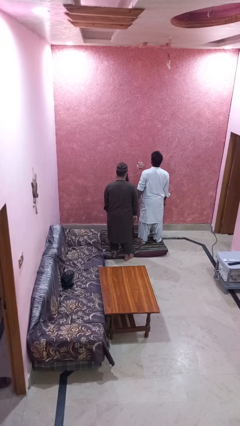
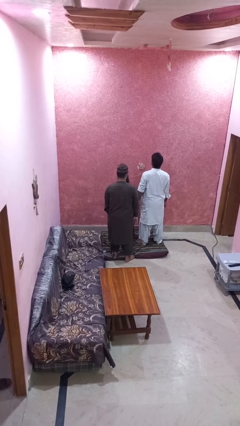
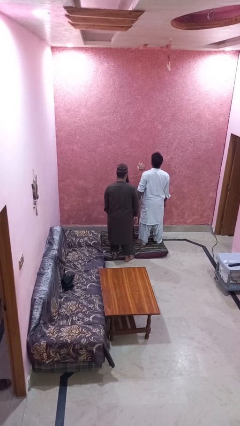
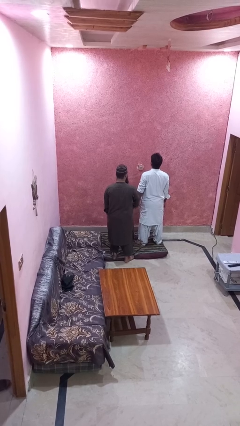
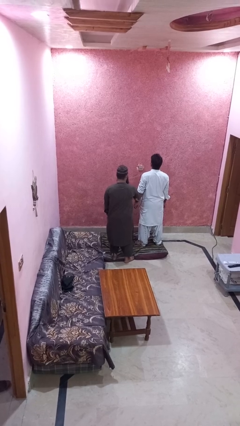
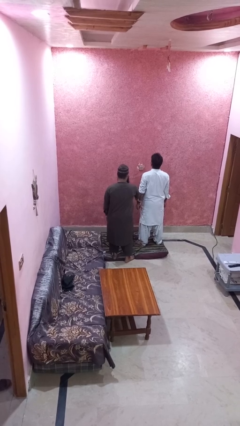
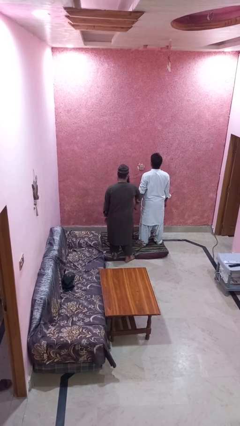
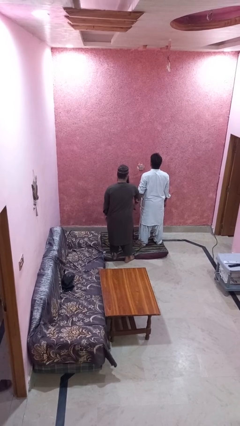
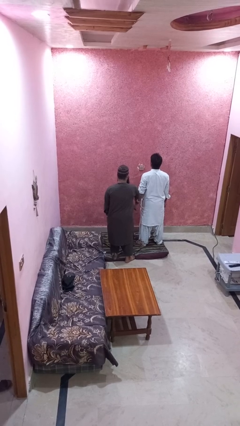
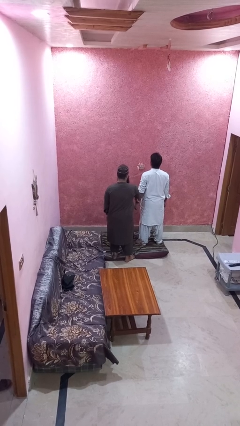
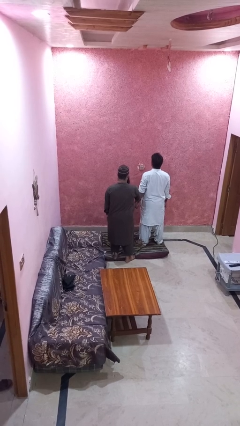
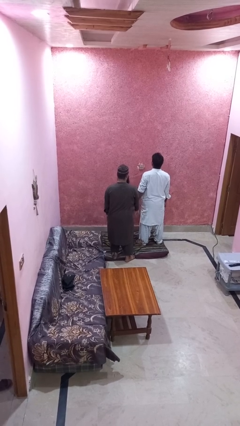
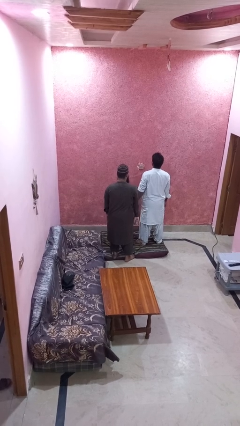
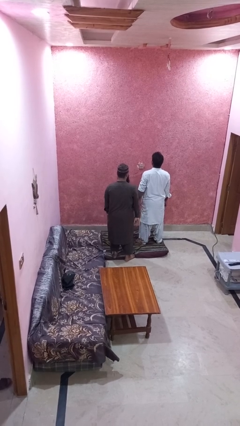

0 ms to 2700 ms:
person grabs person by forearm

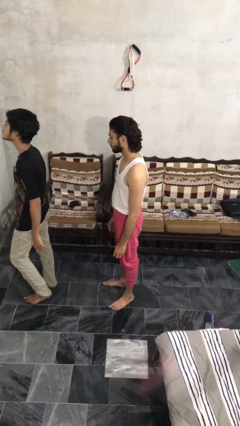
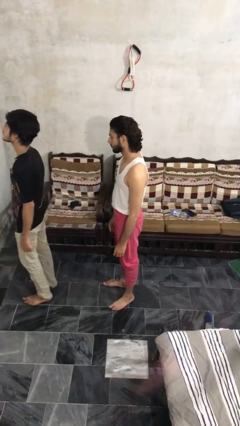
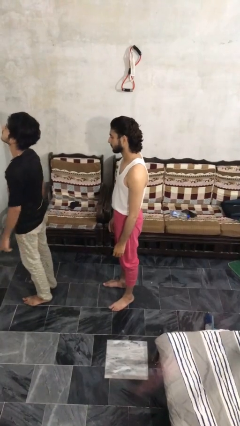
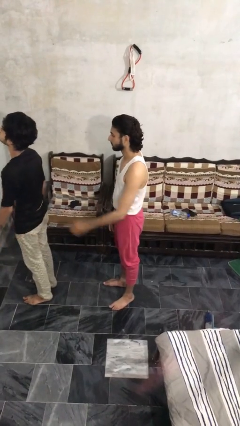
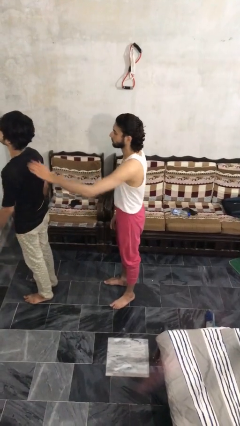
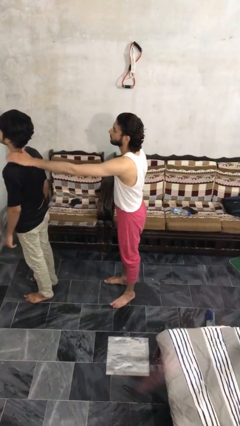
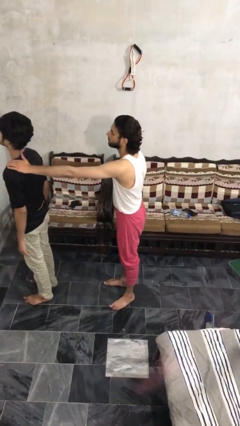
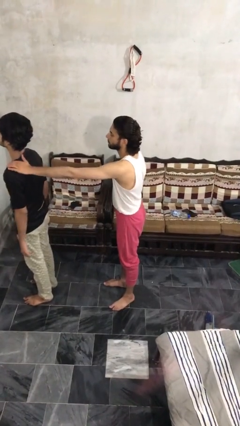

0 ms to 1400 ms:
person grabs person by shoulder

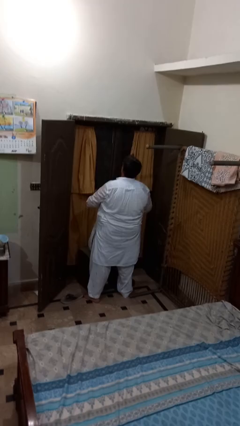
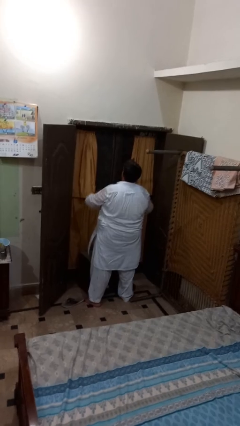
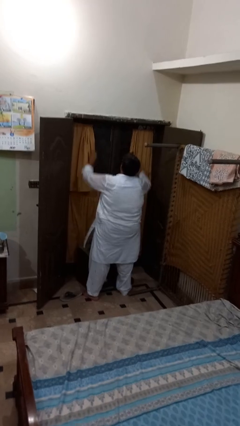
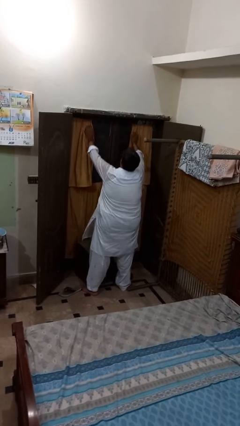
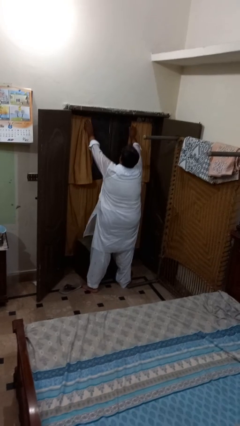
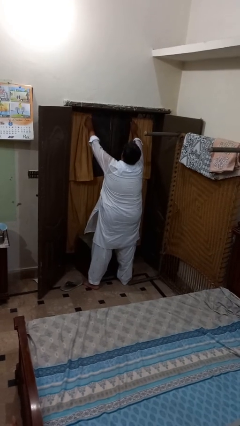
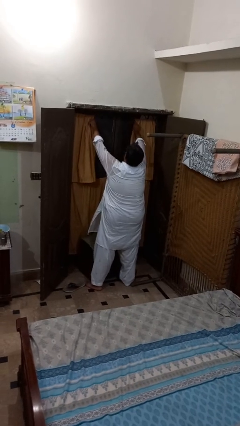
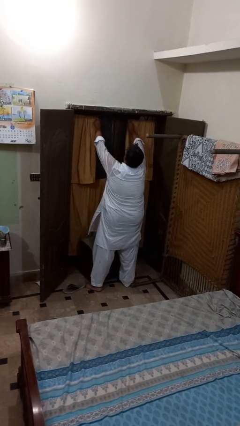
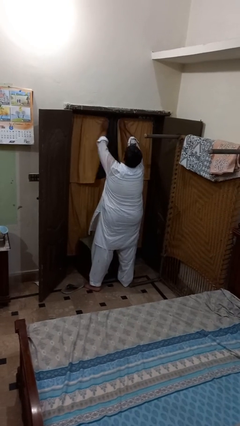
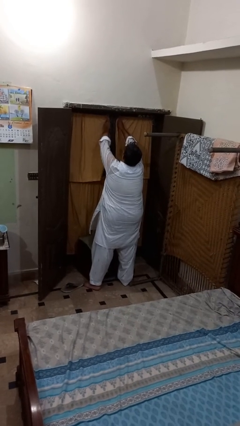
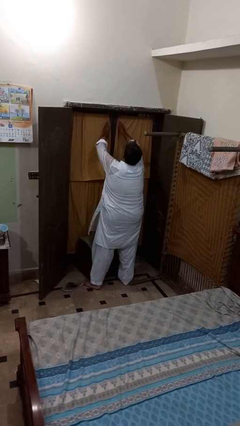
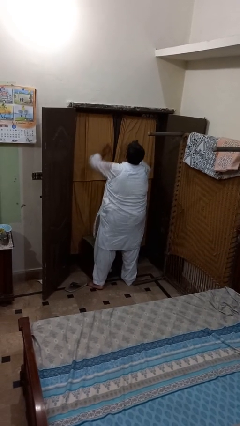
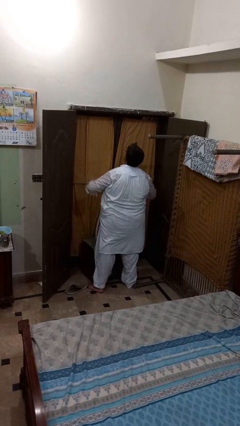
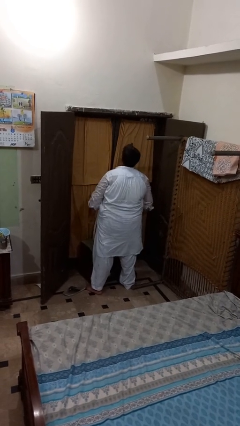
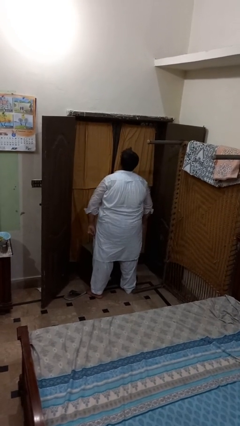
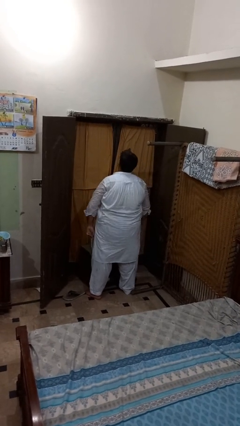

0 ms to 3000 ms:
person closes curtains

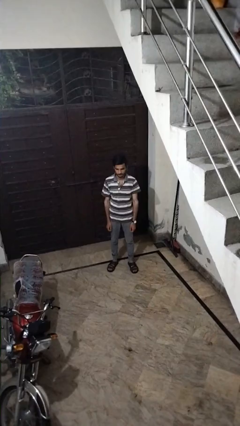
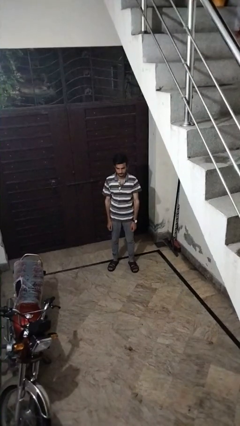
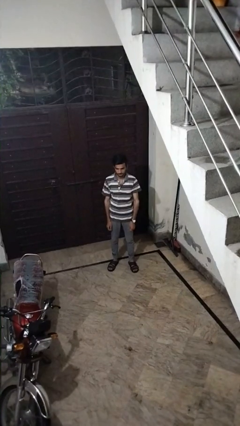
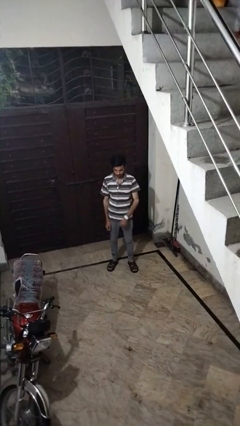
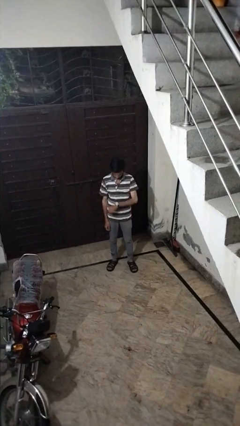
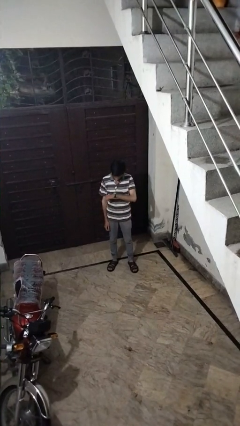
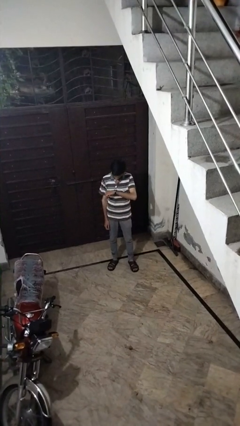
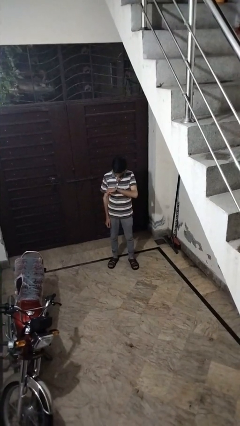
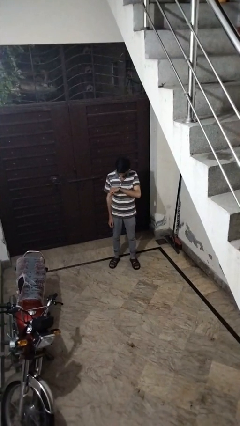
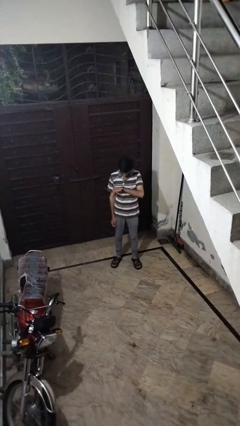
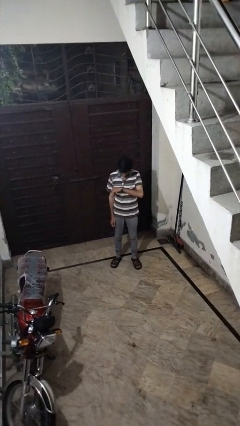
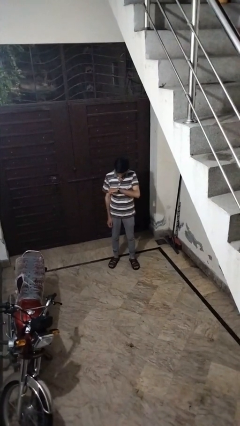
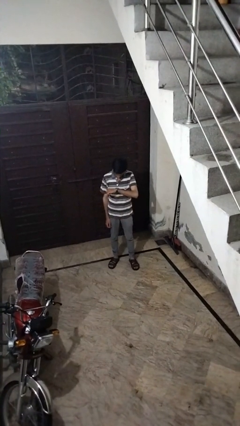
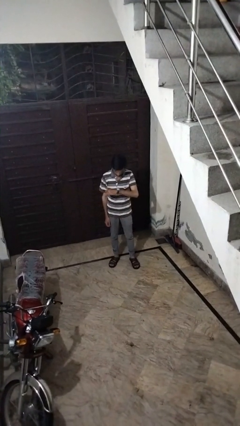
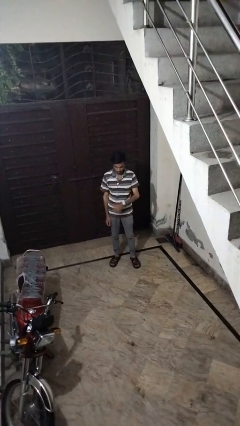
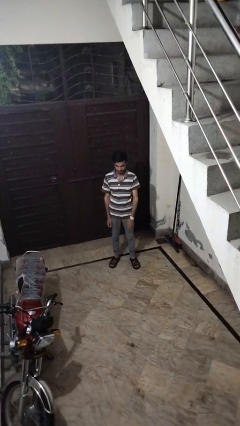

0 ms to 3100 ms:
person looks at wristwatch

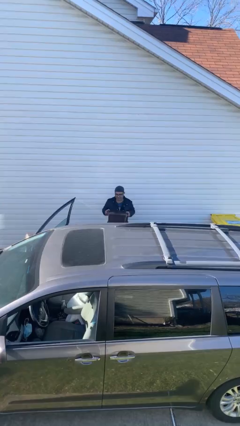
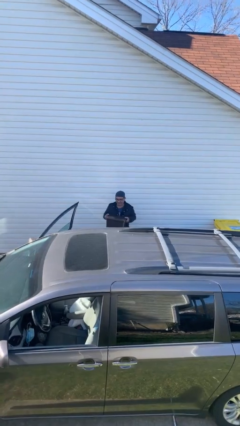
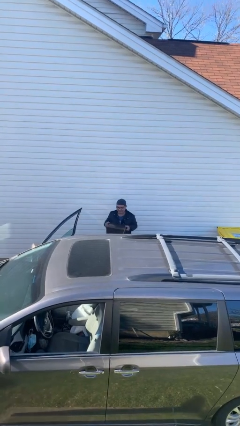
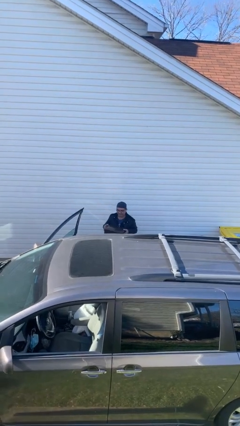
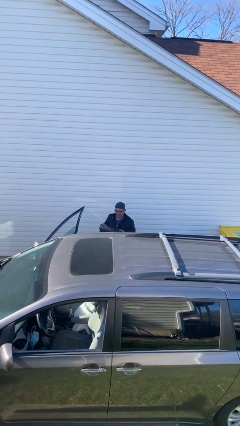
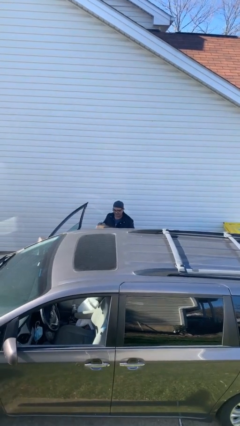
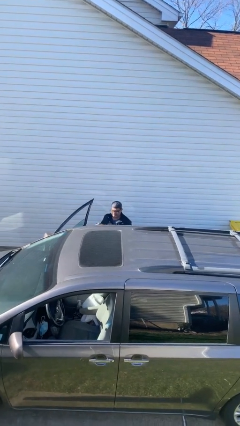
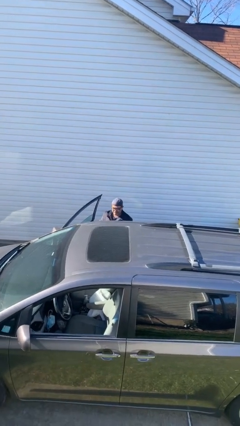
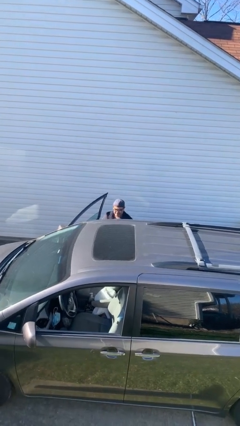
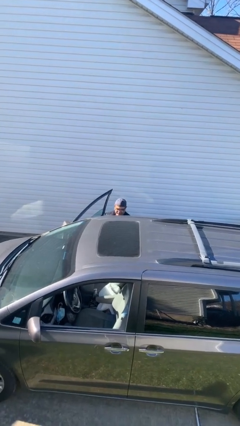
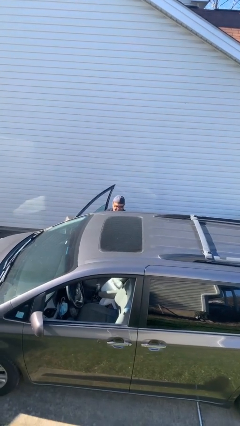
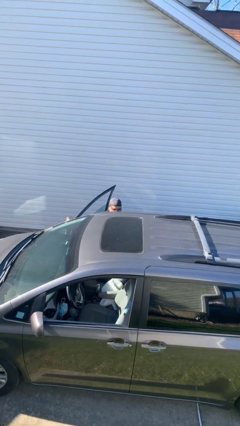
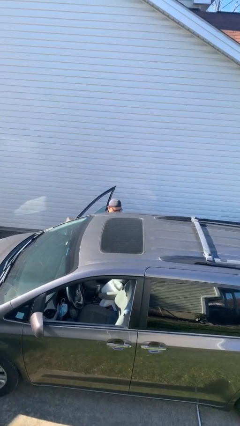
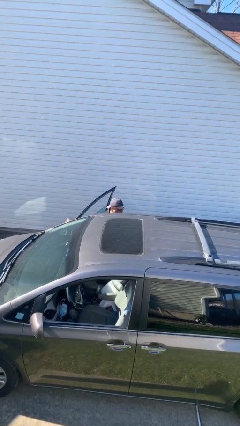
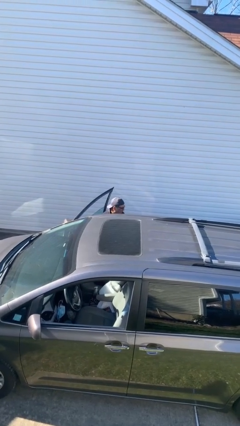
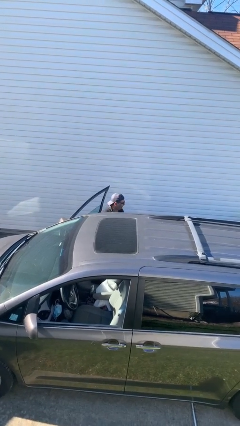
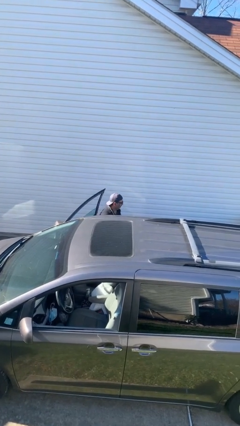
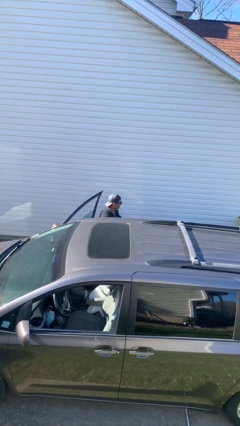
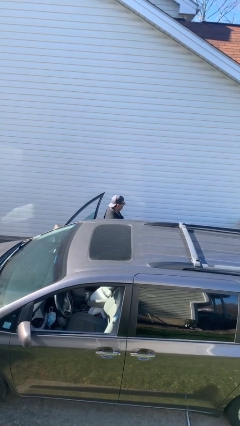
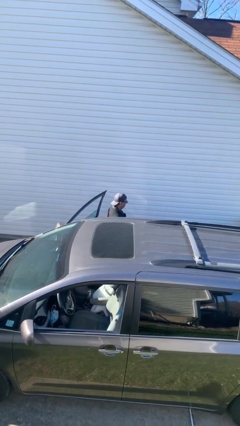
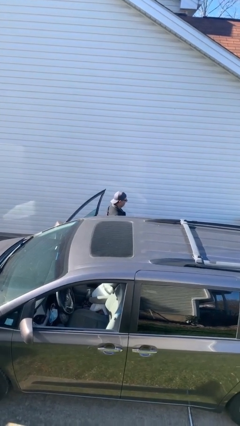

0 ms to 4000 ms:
person loads car

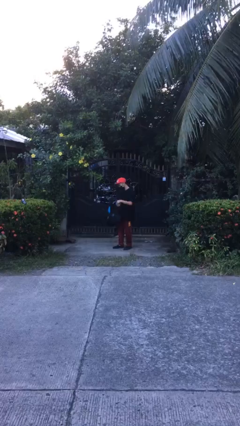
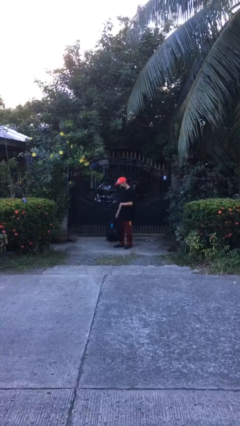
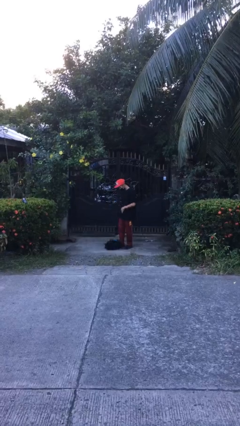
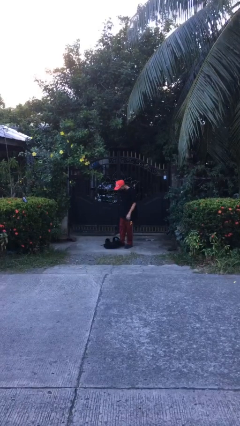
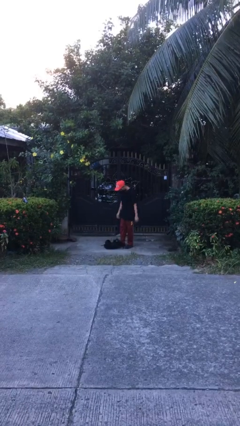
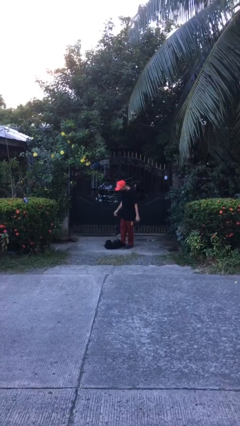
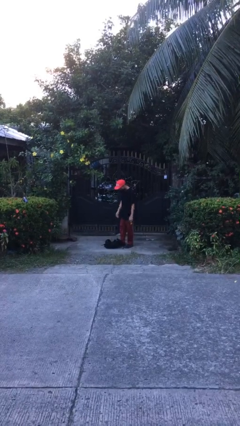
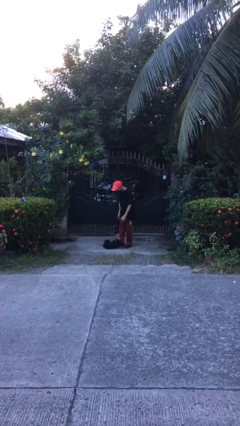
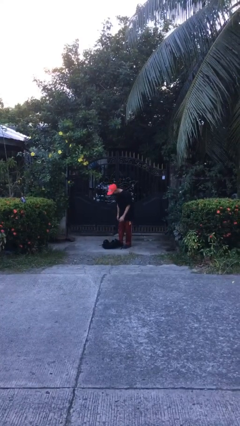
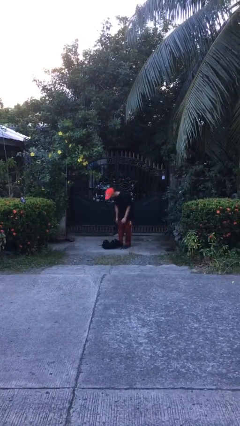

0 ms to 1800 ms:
person drops object

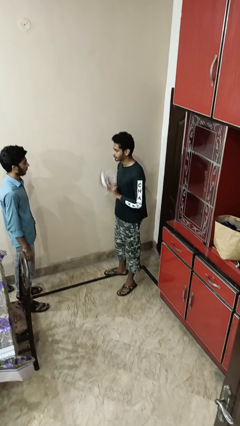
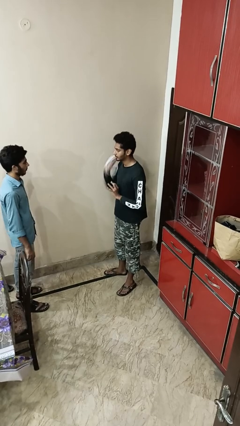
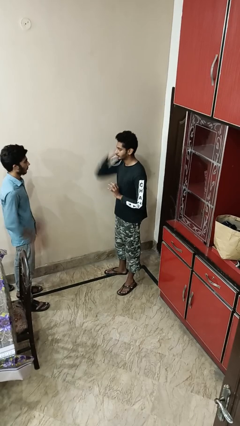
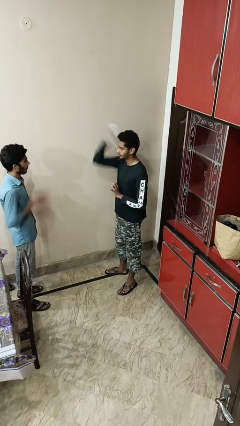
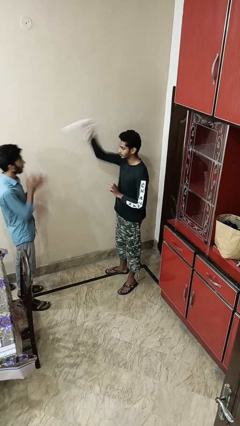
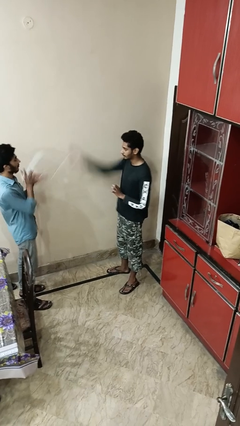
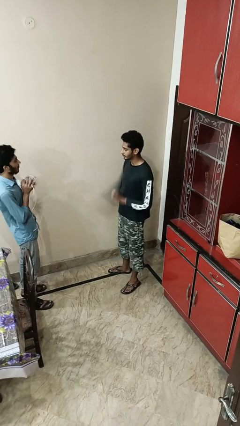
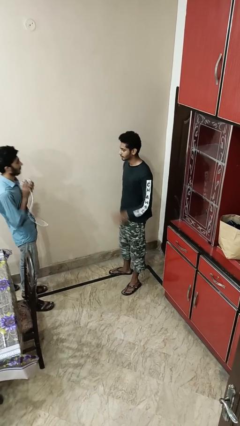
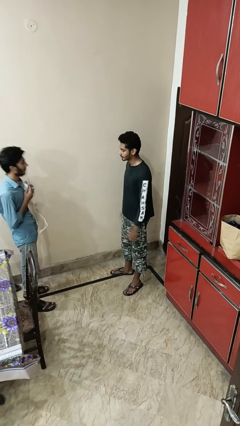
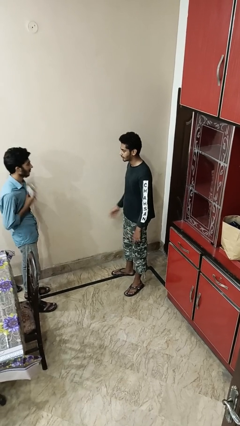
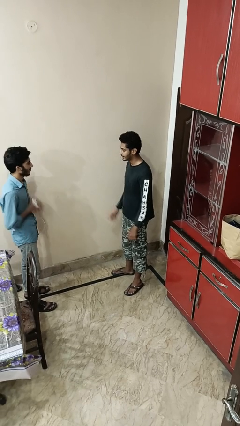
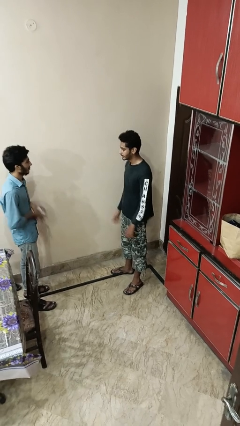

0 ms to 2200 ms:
person throws object to person
